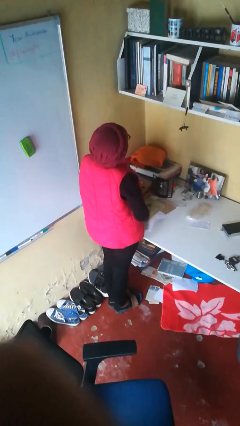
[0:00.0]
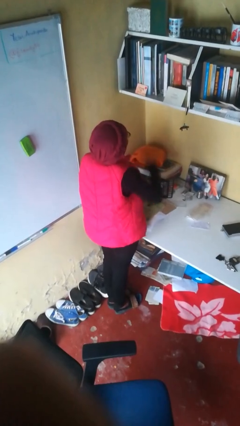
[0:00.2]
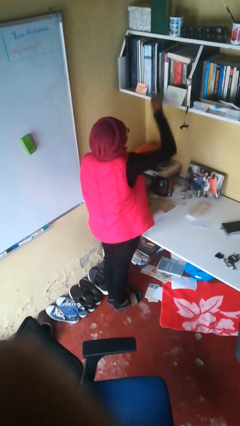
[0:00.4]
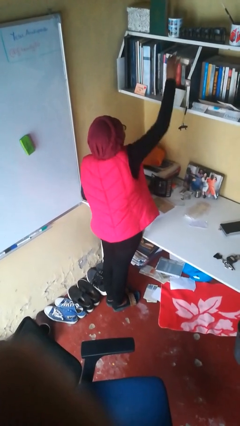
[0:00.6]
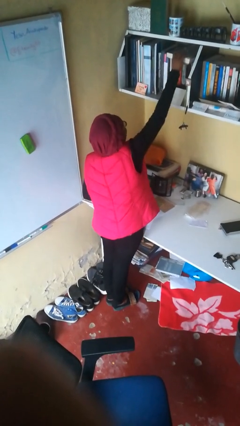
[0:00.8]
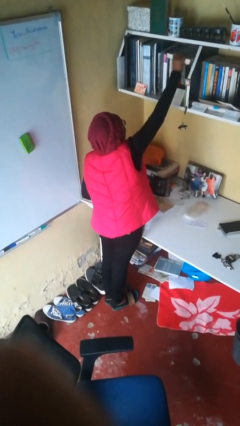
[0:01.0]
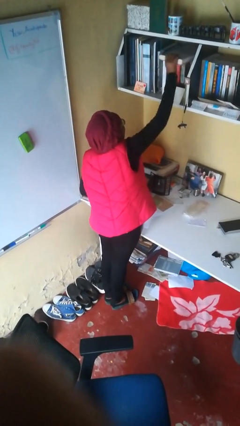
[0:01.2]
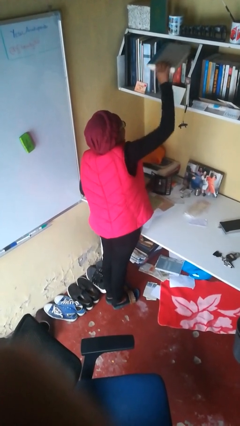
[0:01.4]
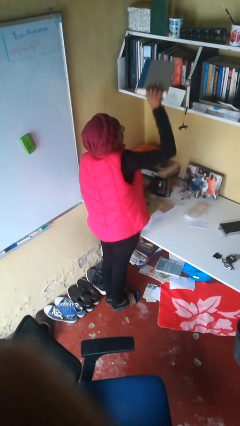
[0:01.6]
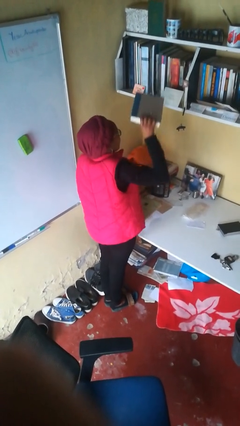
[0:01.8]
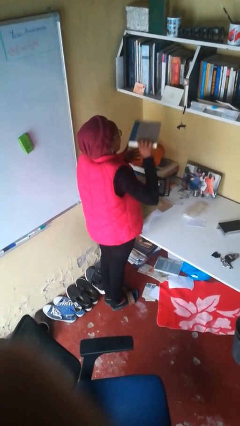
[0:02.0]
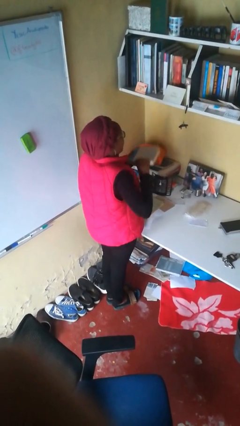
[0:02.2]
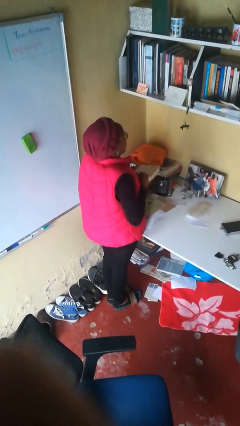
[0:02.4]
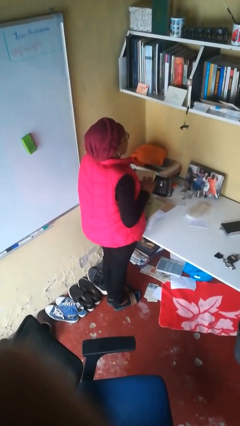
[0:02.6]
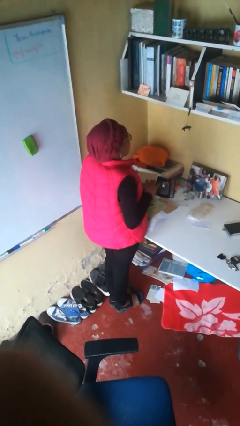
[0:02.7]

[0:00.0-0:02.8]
person picks up object from shelf

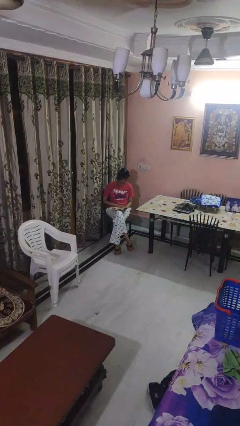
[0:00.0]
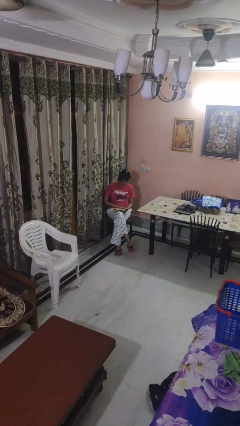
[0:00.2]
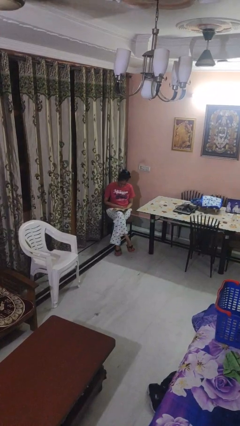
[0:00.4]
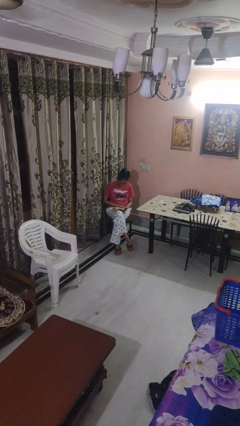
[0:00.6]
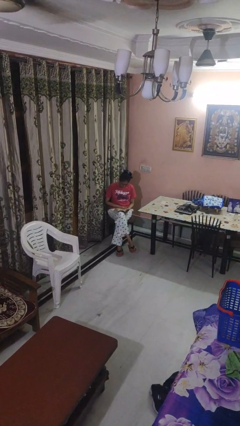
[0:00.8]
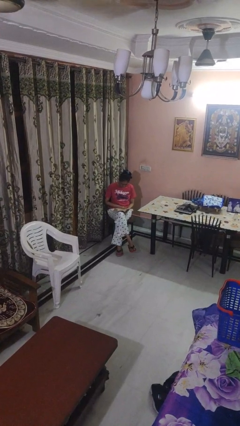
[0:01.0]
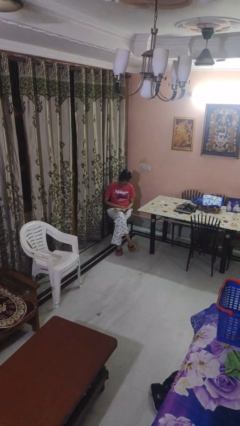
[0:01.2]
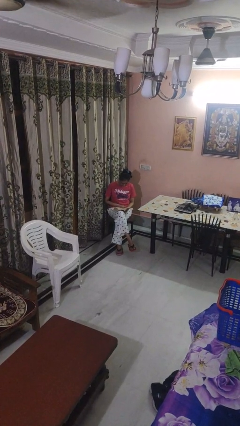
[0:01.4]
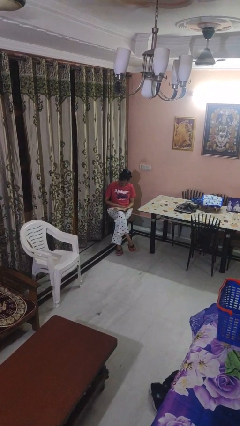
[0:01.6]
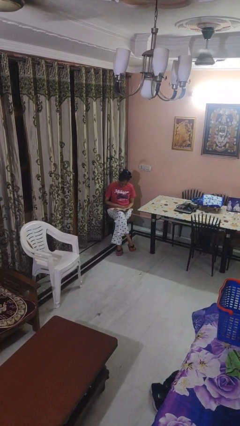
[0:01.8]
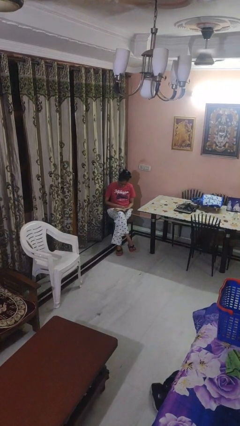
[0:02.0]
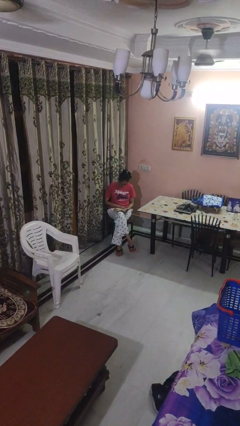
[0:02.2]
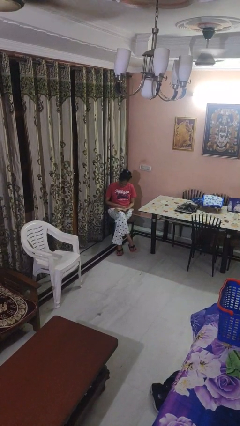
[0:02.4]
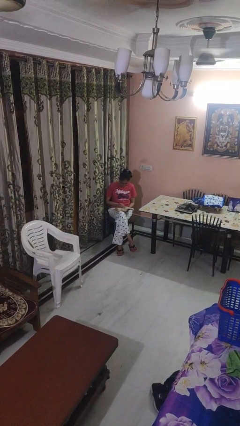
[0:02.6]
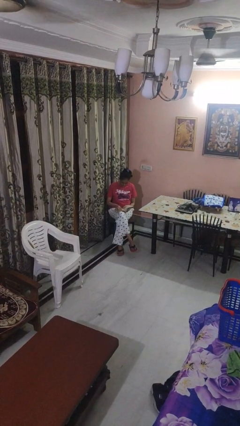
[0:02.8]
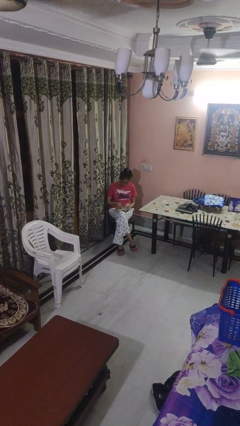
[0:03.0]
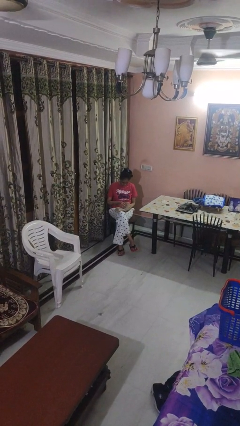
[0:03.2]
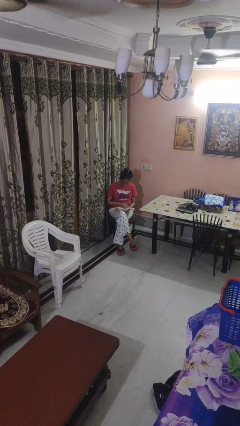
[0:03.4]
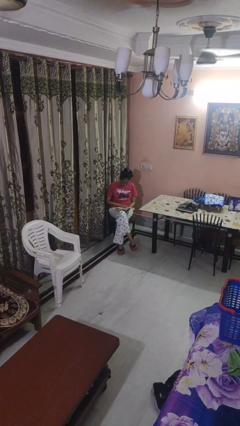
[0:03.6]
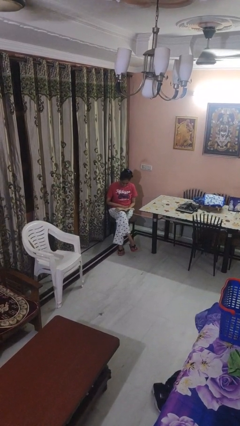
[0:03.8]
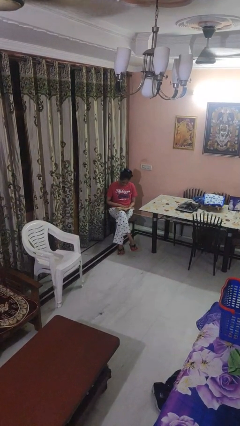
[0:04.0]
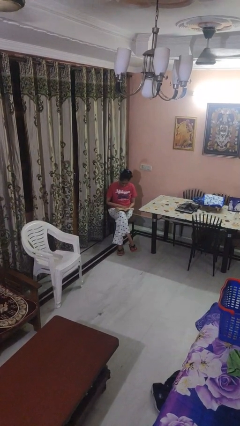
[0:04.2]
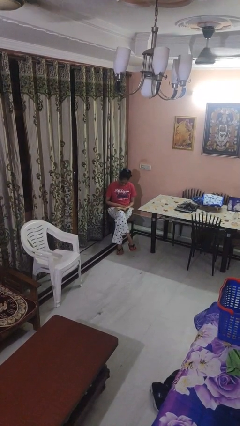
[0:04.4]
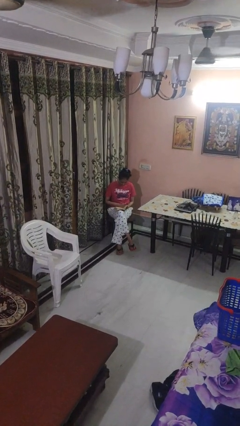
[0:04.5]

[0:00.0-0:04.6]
person reads book

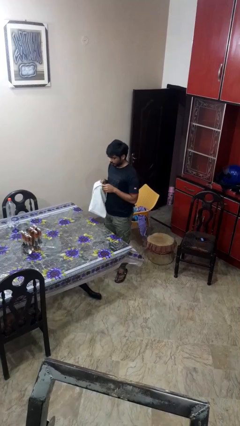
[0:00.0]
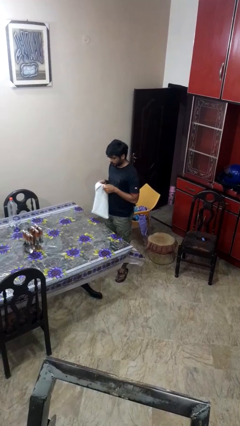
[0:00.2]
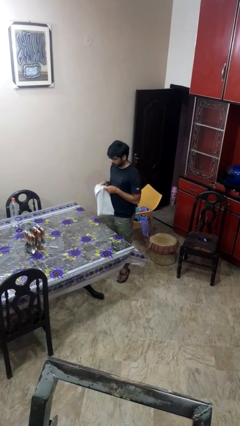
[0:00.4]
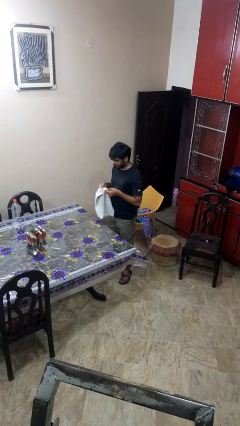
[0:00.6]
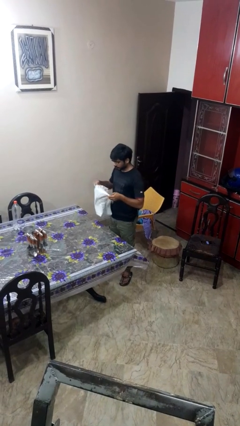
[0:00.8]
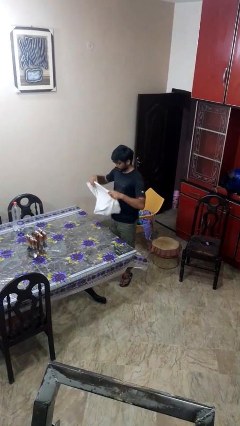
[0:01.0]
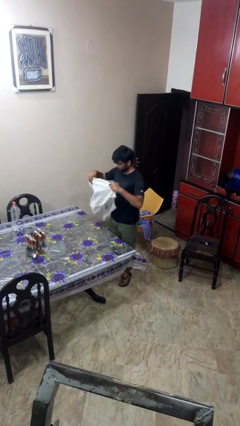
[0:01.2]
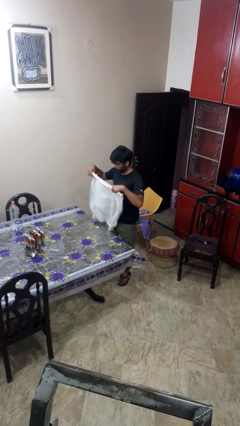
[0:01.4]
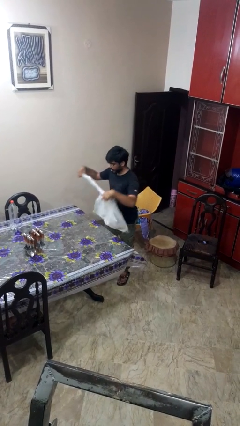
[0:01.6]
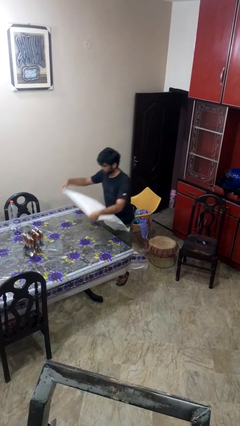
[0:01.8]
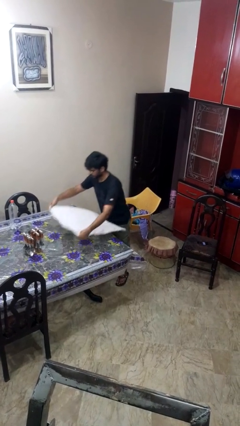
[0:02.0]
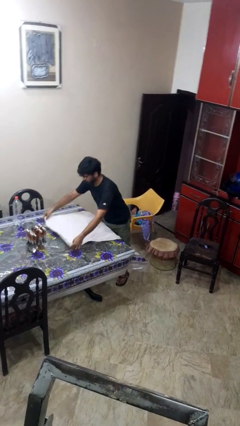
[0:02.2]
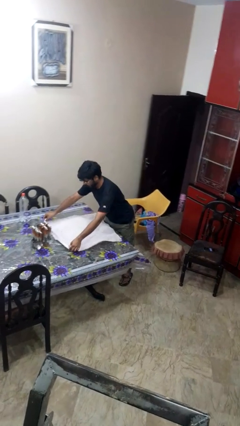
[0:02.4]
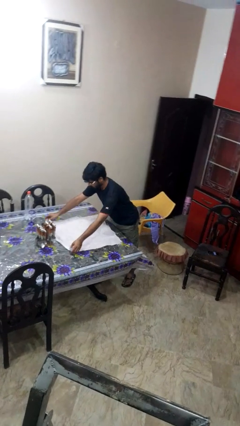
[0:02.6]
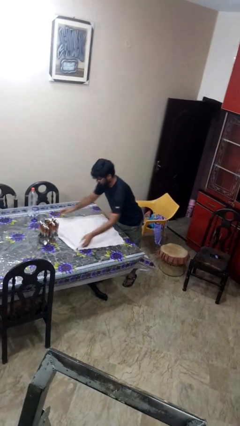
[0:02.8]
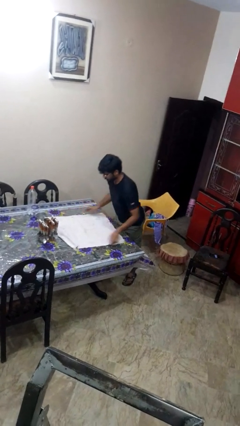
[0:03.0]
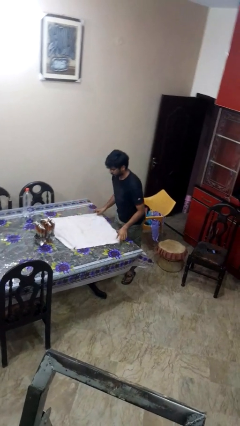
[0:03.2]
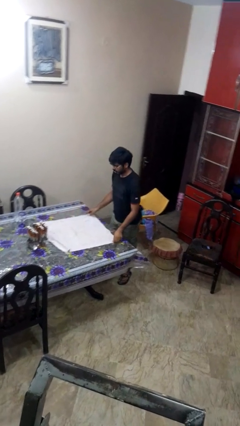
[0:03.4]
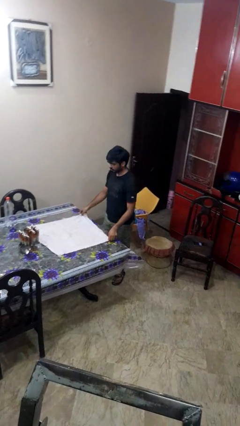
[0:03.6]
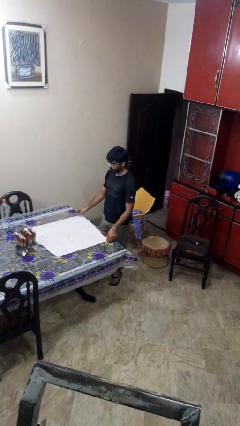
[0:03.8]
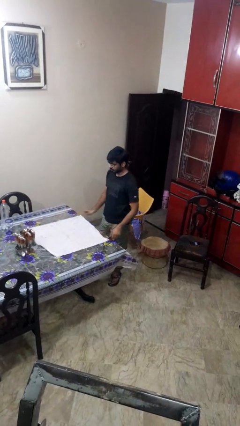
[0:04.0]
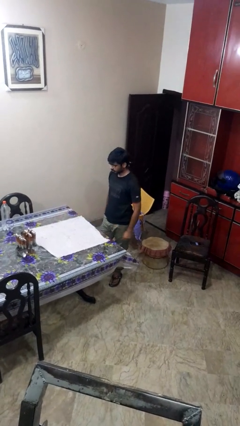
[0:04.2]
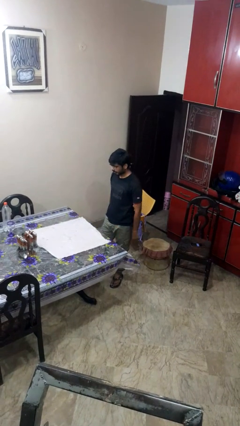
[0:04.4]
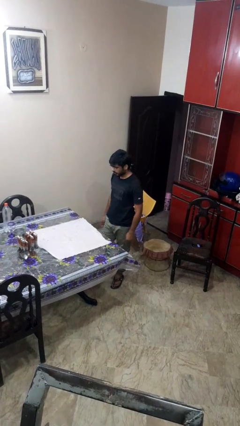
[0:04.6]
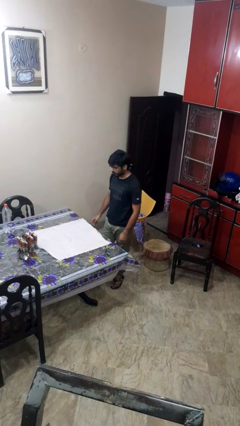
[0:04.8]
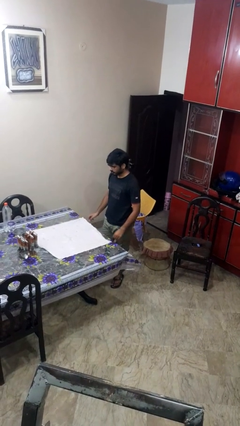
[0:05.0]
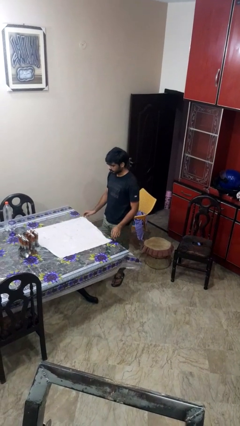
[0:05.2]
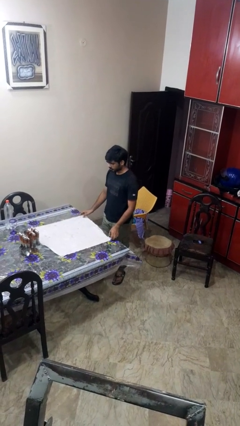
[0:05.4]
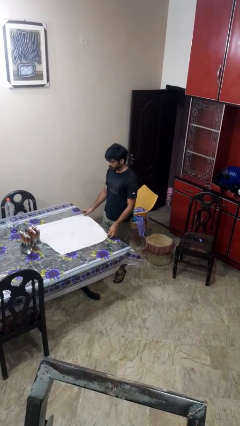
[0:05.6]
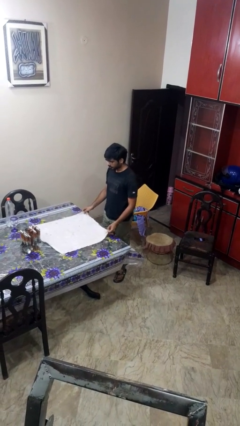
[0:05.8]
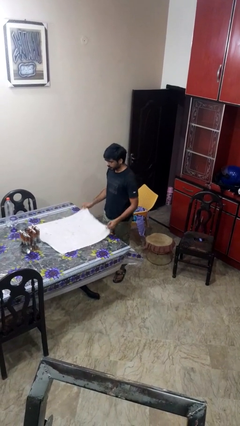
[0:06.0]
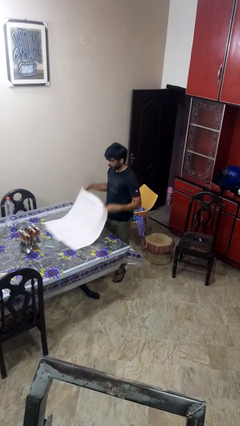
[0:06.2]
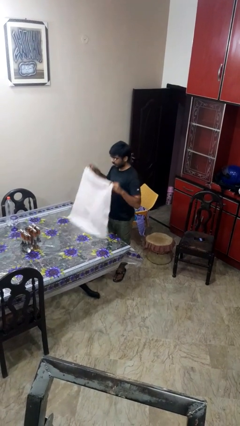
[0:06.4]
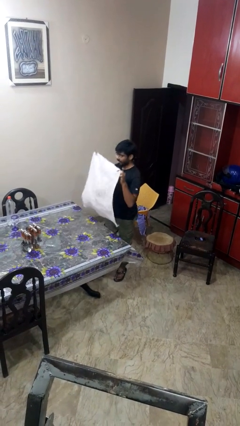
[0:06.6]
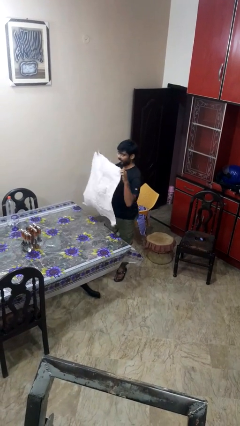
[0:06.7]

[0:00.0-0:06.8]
person spreads tablecloth

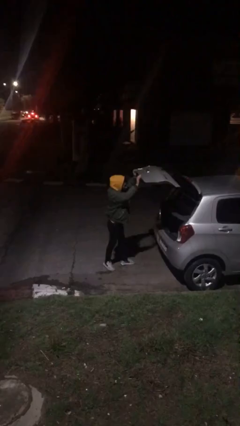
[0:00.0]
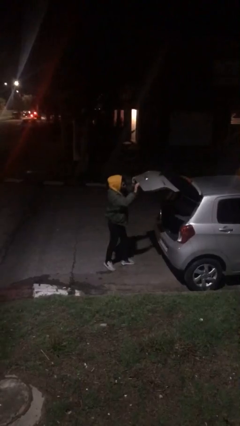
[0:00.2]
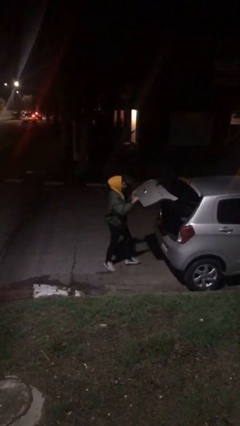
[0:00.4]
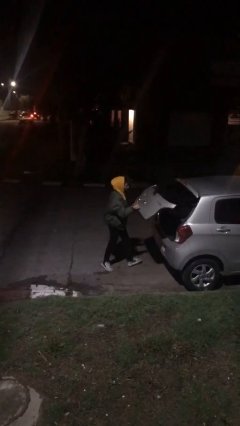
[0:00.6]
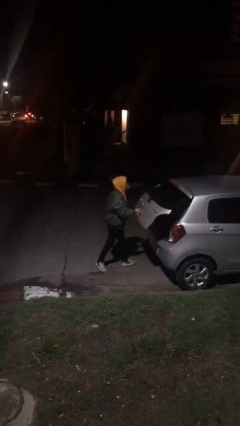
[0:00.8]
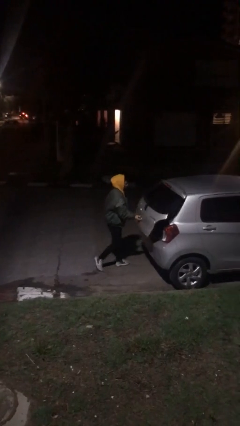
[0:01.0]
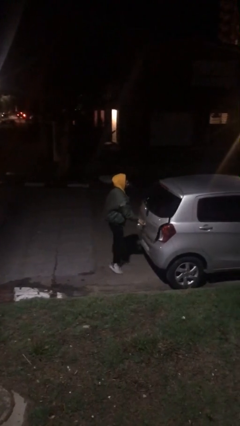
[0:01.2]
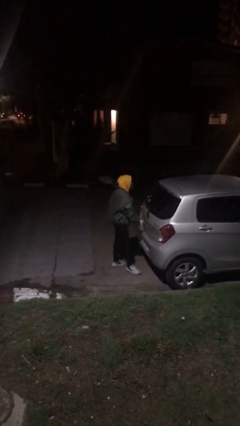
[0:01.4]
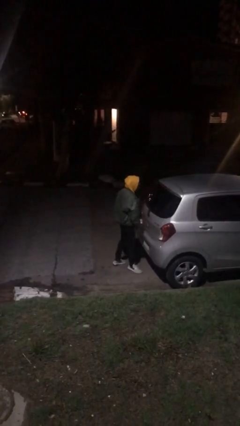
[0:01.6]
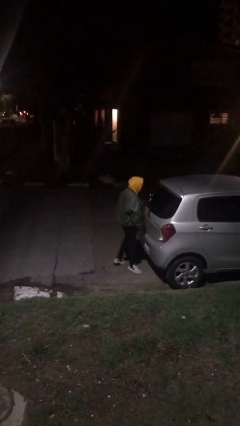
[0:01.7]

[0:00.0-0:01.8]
person closes car trunk

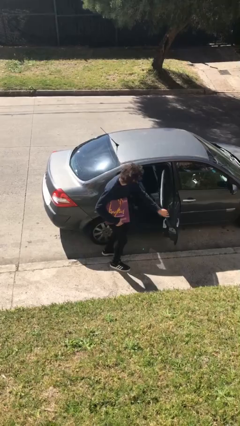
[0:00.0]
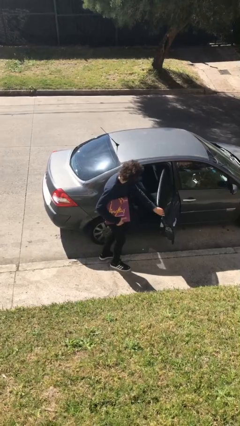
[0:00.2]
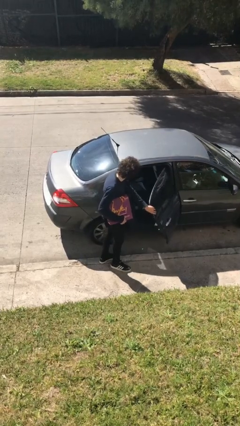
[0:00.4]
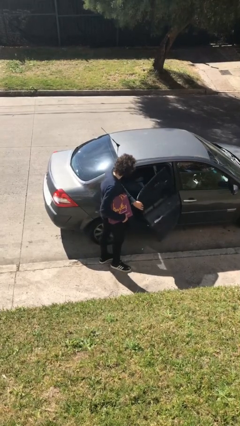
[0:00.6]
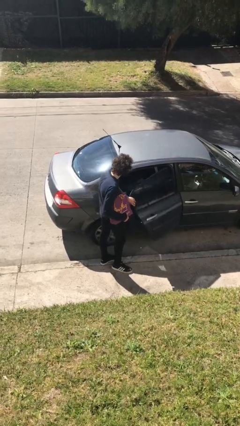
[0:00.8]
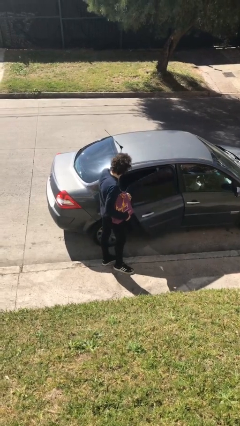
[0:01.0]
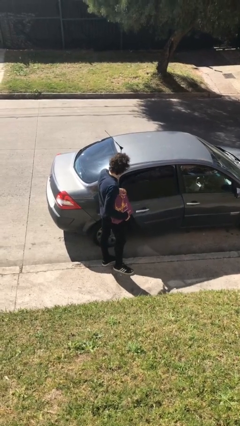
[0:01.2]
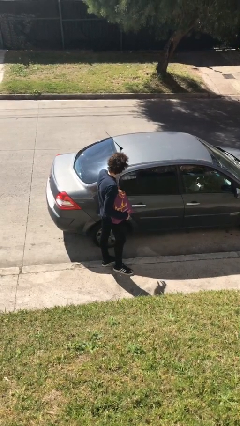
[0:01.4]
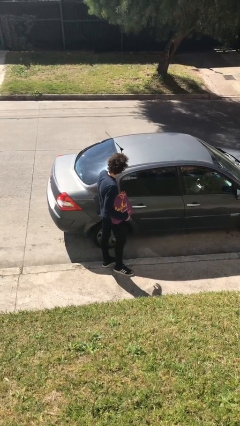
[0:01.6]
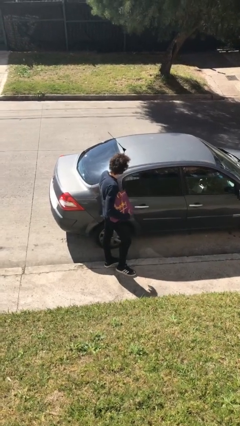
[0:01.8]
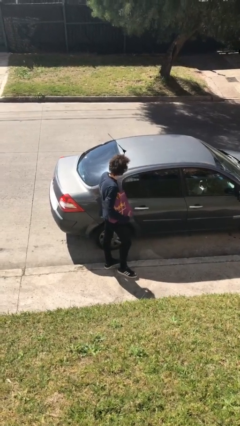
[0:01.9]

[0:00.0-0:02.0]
person closes car door
